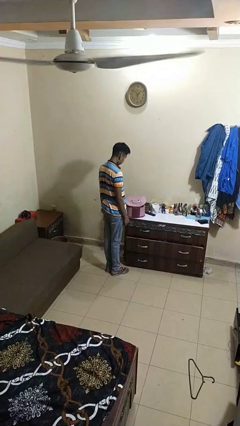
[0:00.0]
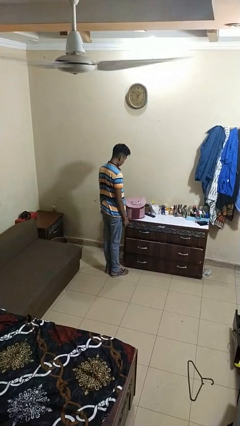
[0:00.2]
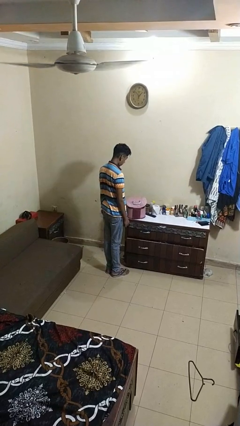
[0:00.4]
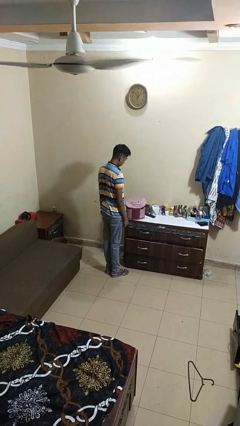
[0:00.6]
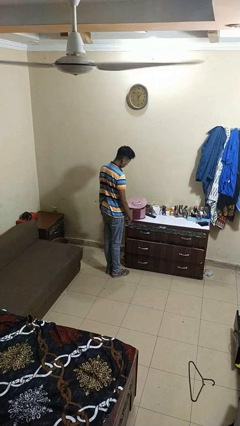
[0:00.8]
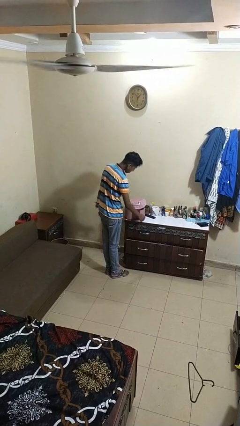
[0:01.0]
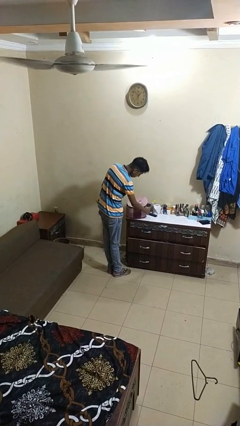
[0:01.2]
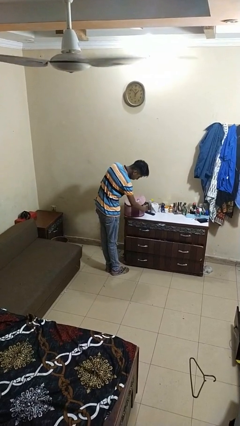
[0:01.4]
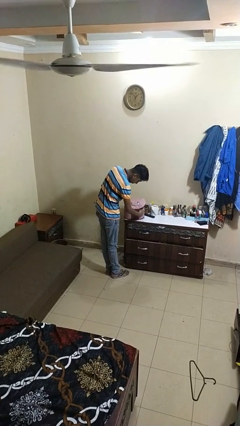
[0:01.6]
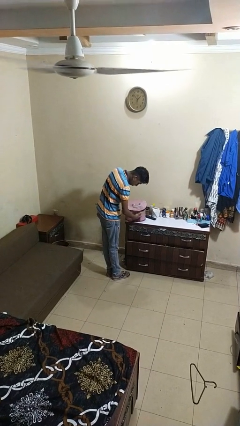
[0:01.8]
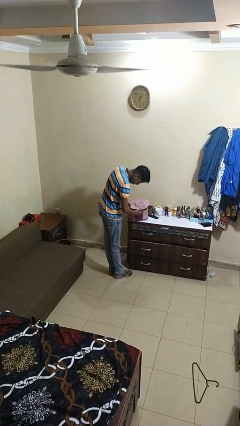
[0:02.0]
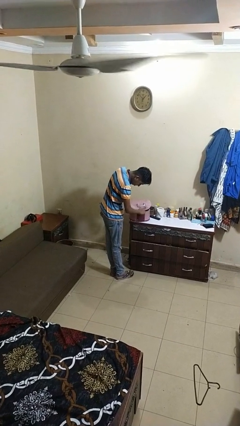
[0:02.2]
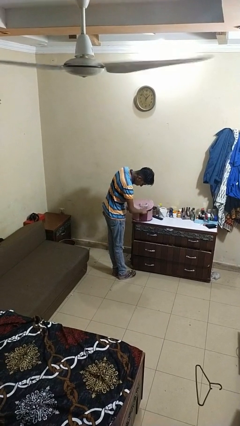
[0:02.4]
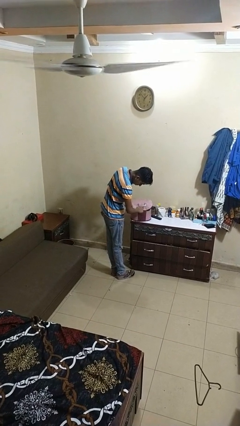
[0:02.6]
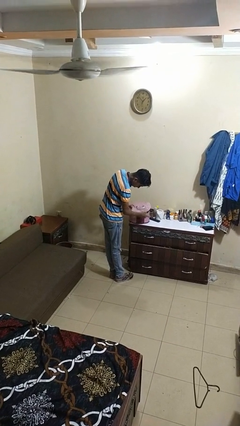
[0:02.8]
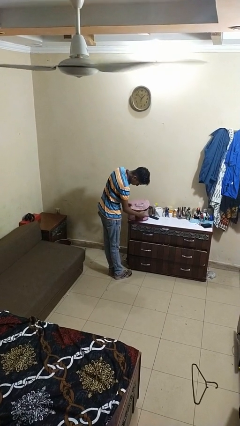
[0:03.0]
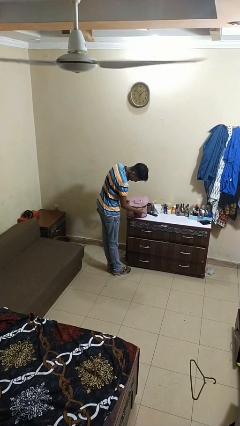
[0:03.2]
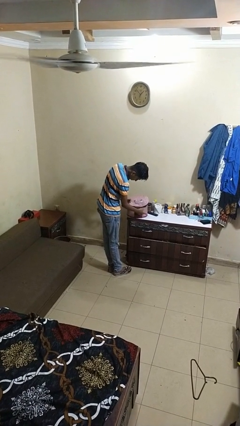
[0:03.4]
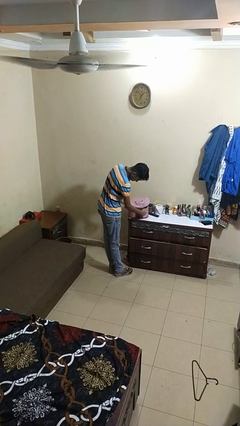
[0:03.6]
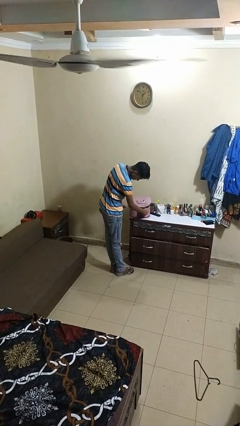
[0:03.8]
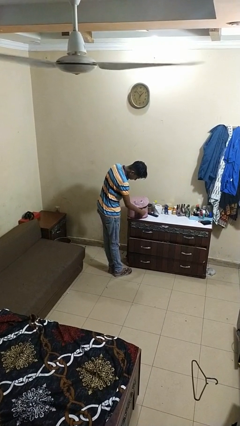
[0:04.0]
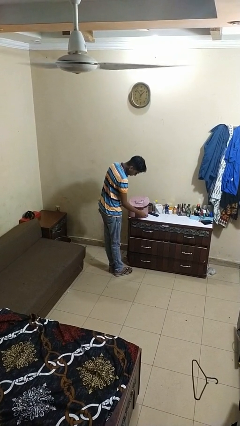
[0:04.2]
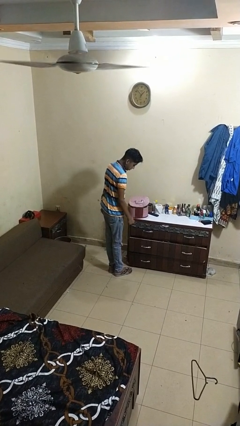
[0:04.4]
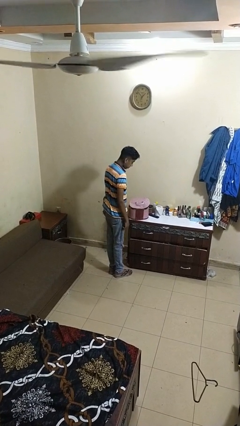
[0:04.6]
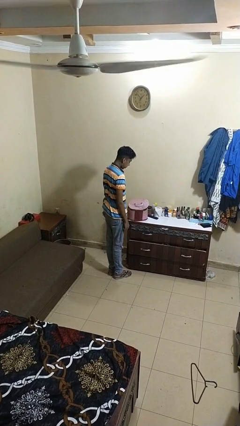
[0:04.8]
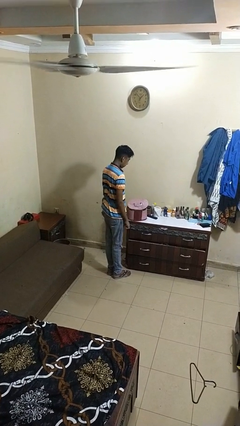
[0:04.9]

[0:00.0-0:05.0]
person taps object with finger

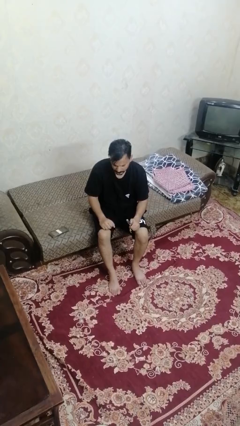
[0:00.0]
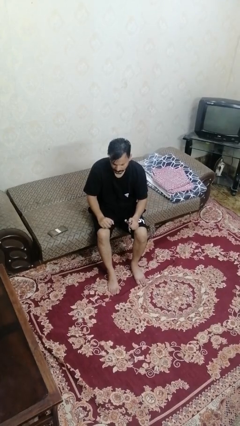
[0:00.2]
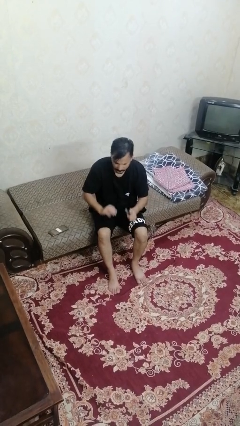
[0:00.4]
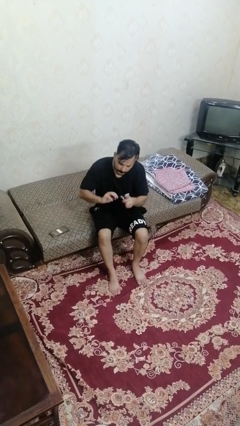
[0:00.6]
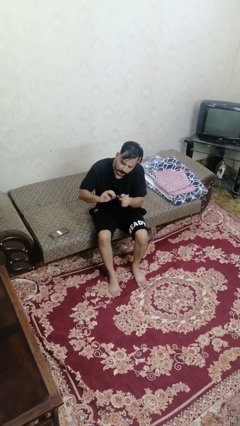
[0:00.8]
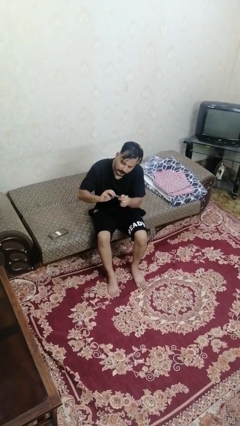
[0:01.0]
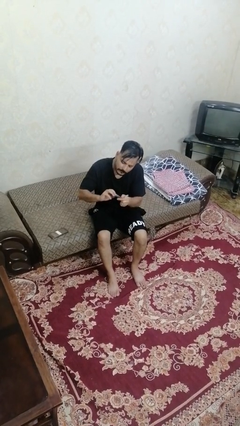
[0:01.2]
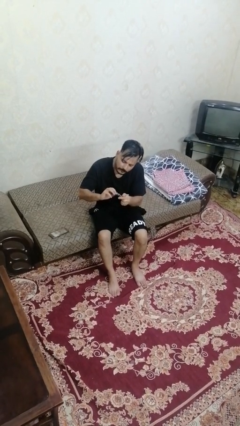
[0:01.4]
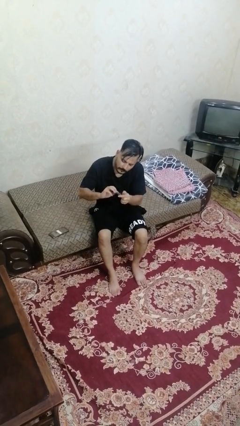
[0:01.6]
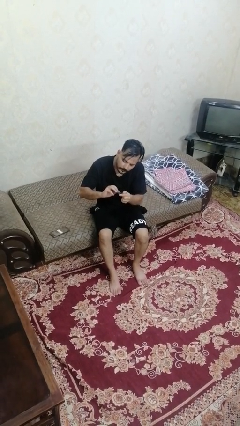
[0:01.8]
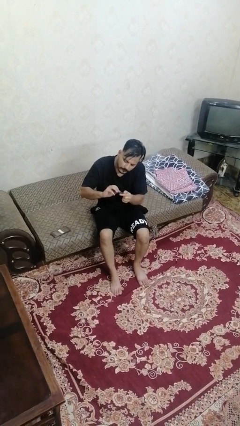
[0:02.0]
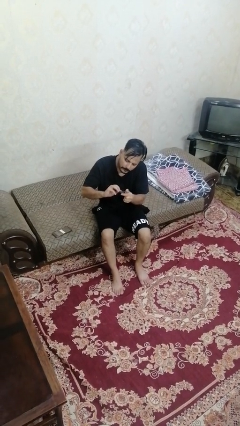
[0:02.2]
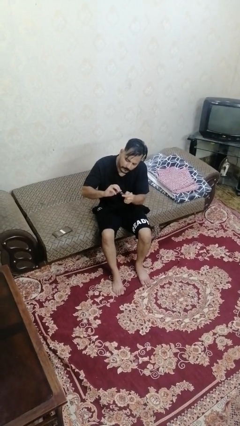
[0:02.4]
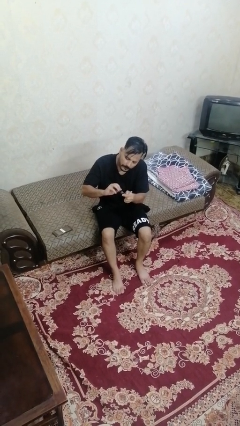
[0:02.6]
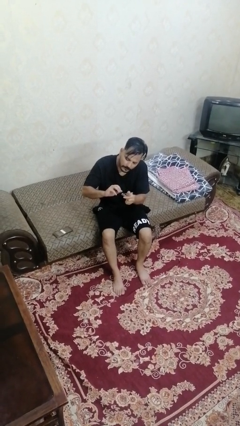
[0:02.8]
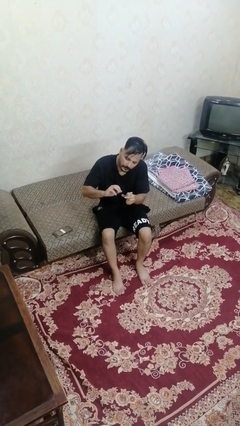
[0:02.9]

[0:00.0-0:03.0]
person clips fingernails

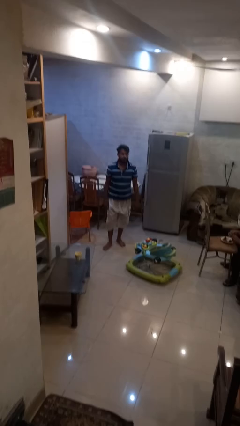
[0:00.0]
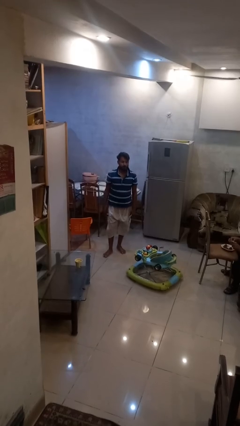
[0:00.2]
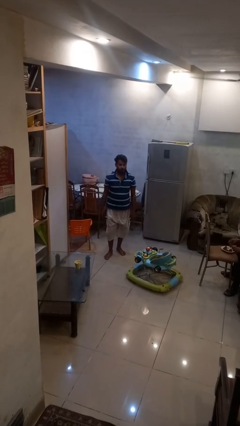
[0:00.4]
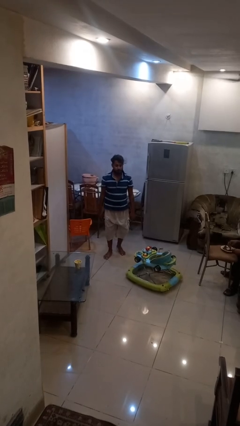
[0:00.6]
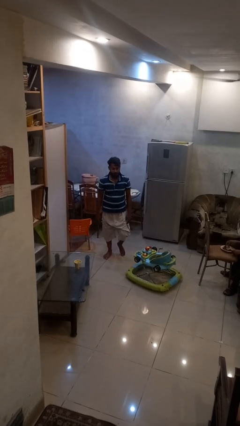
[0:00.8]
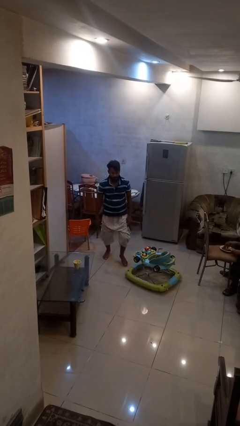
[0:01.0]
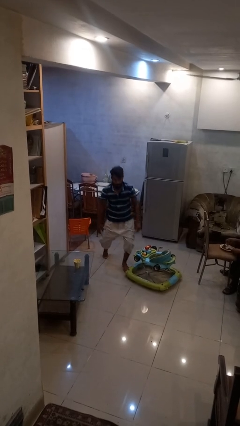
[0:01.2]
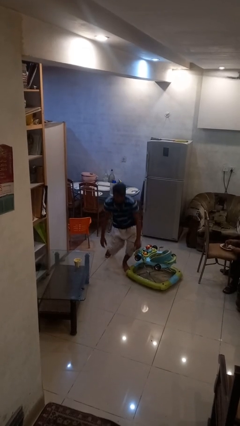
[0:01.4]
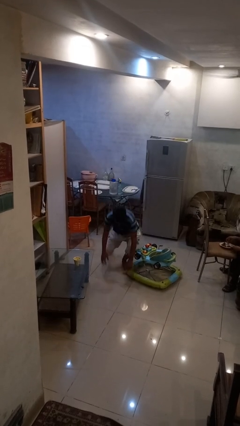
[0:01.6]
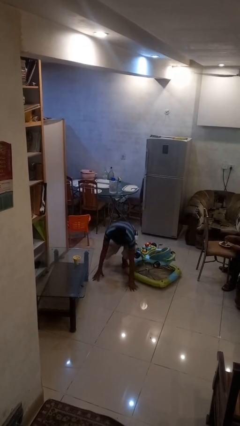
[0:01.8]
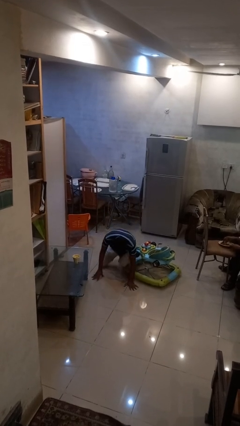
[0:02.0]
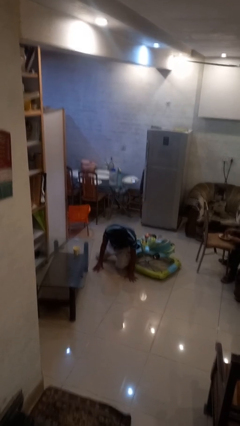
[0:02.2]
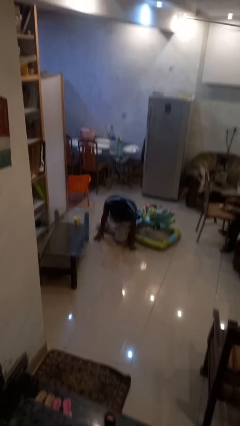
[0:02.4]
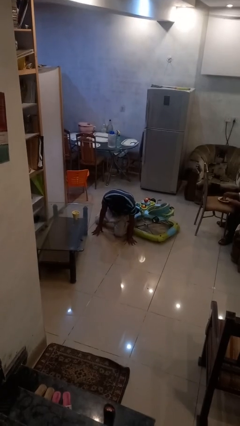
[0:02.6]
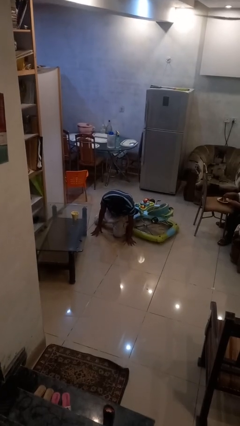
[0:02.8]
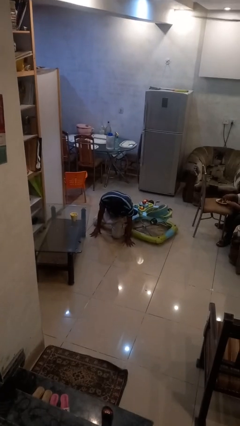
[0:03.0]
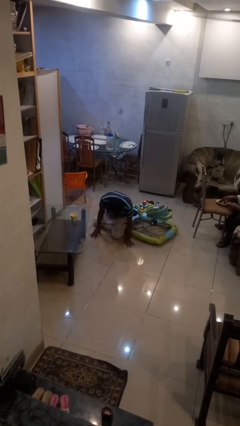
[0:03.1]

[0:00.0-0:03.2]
person trips on object on floor

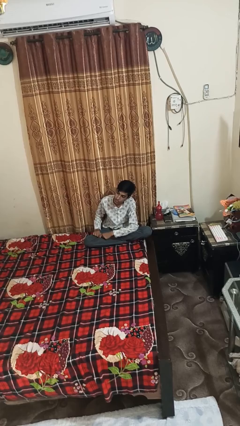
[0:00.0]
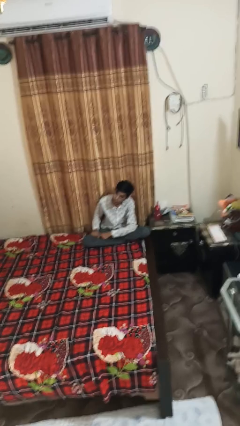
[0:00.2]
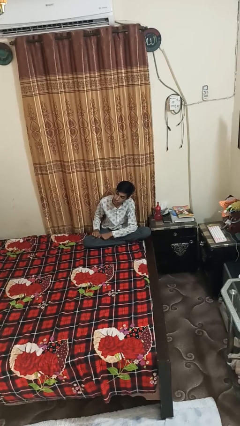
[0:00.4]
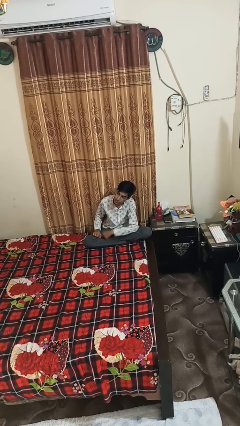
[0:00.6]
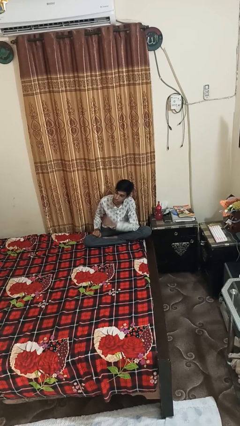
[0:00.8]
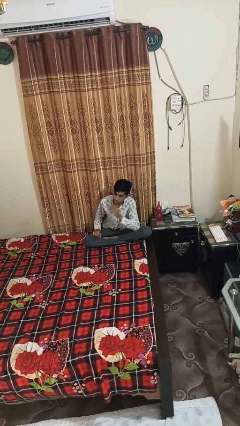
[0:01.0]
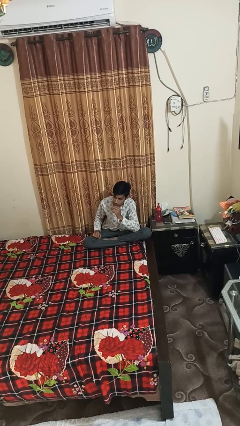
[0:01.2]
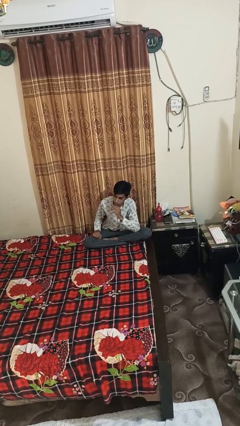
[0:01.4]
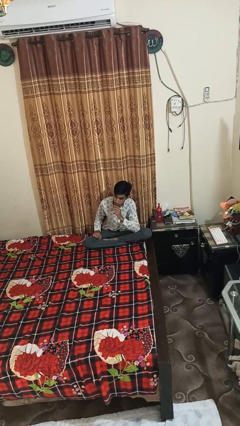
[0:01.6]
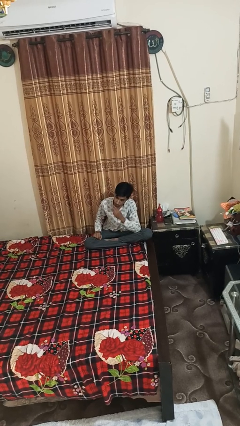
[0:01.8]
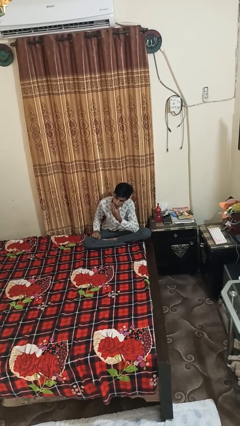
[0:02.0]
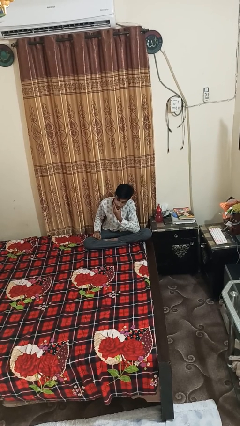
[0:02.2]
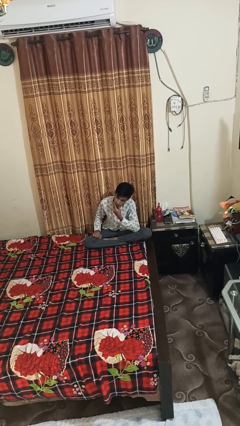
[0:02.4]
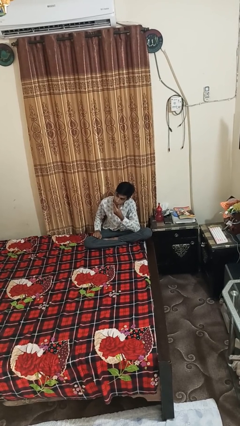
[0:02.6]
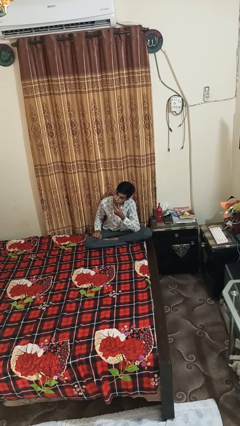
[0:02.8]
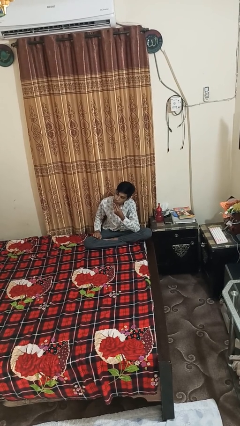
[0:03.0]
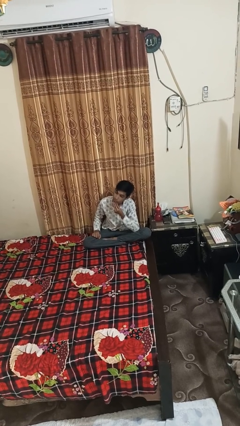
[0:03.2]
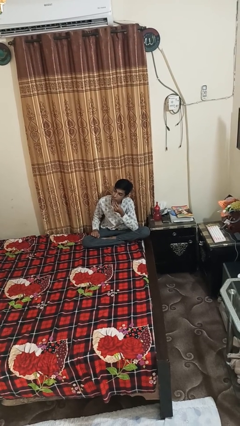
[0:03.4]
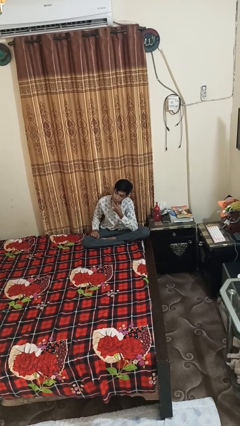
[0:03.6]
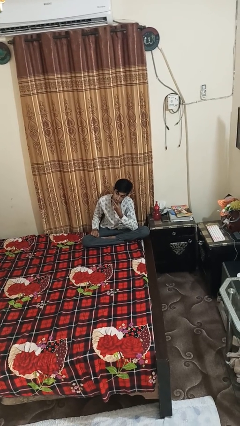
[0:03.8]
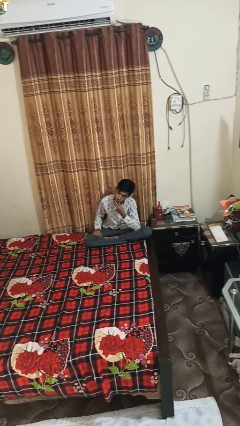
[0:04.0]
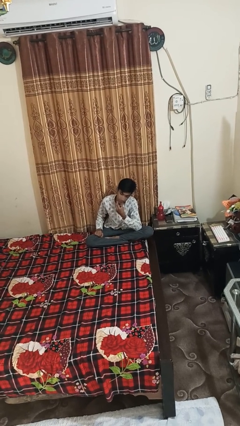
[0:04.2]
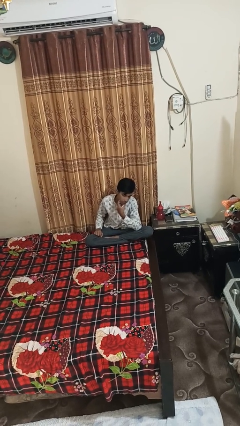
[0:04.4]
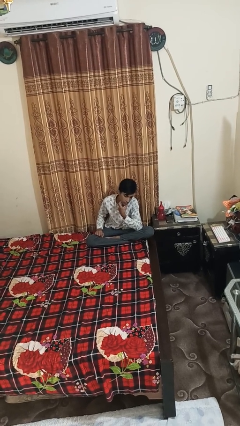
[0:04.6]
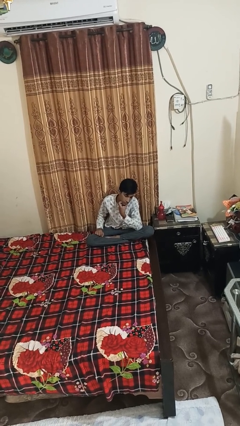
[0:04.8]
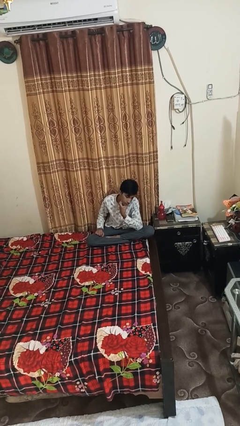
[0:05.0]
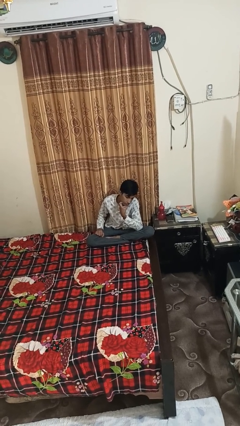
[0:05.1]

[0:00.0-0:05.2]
person strokes chin

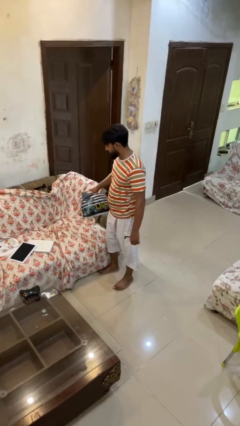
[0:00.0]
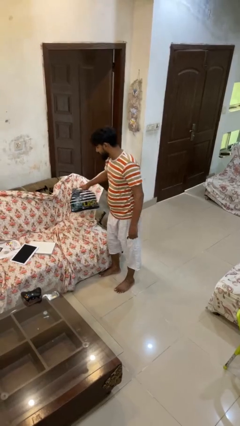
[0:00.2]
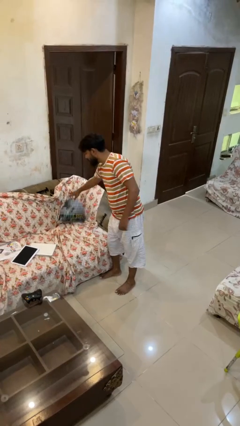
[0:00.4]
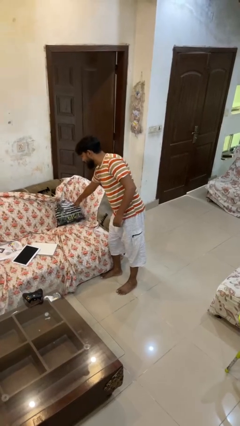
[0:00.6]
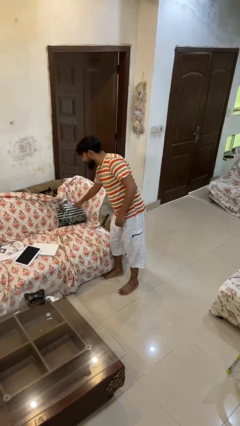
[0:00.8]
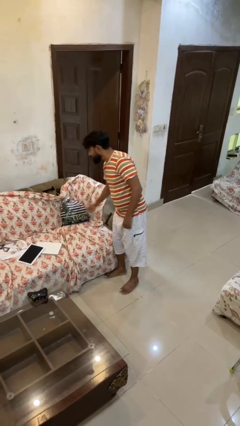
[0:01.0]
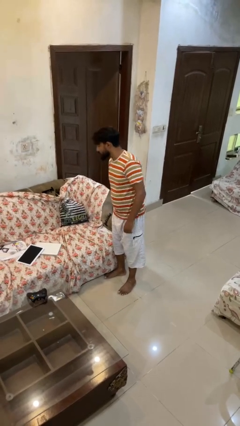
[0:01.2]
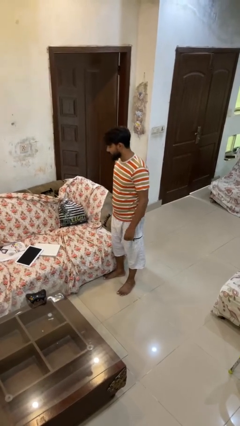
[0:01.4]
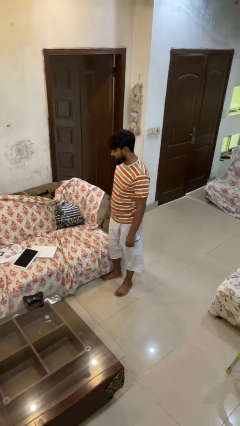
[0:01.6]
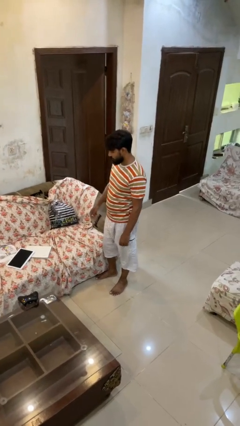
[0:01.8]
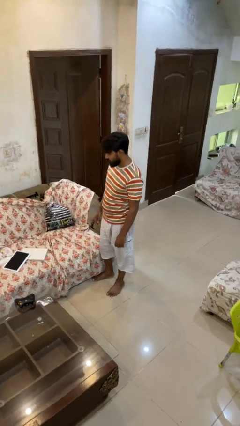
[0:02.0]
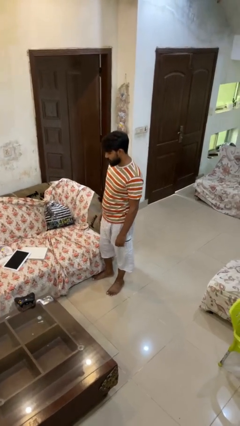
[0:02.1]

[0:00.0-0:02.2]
person puts down object on couch
